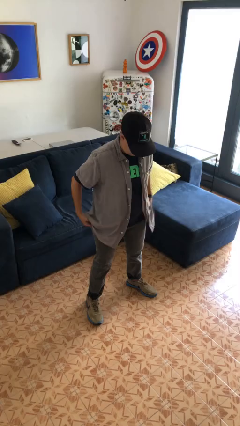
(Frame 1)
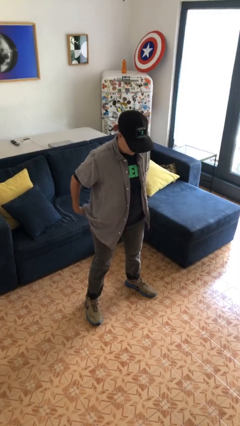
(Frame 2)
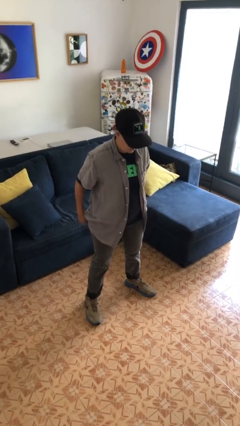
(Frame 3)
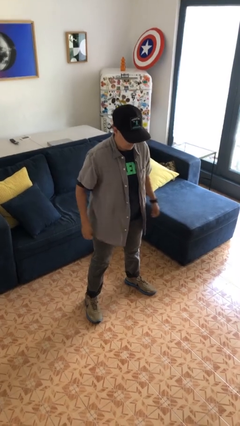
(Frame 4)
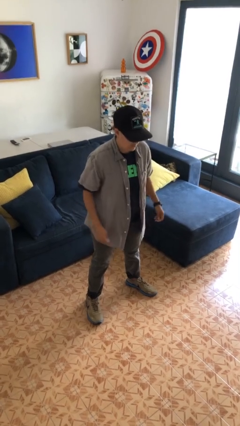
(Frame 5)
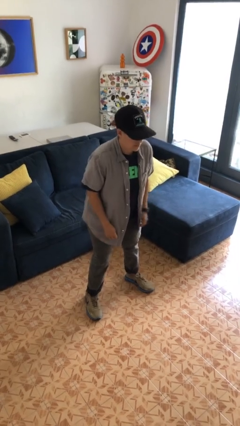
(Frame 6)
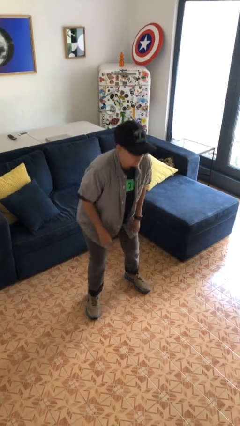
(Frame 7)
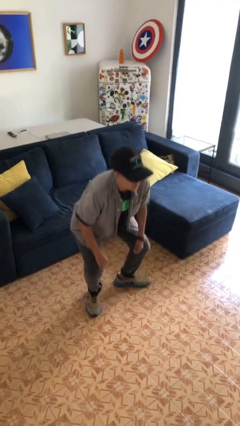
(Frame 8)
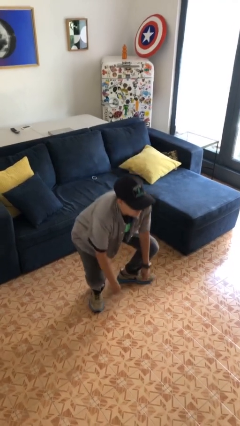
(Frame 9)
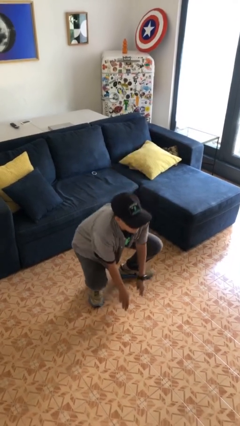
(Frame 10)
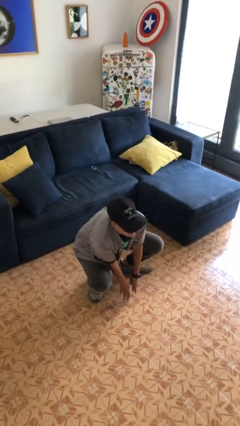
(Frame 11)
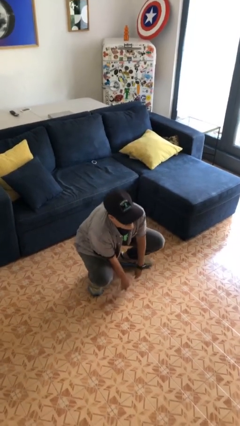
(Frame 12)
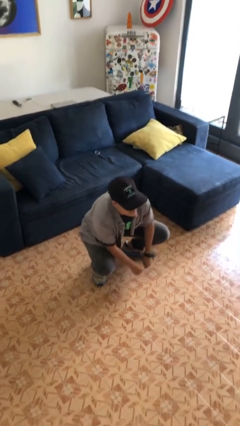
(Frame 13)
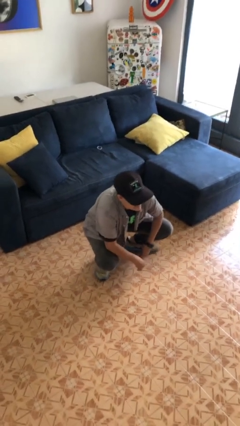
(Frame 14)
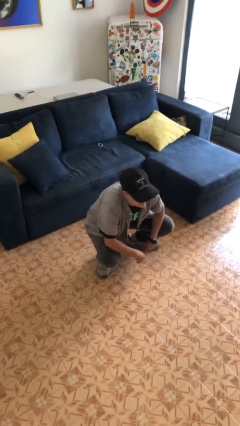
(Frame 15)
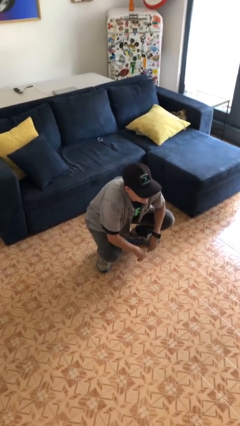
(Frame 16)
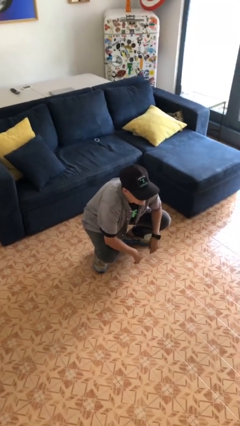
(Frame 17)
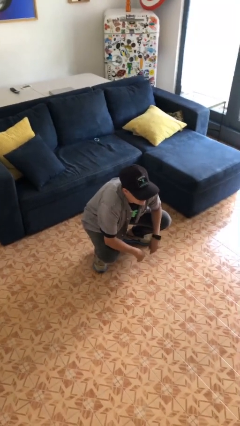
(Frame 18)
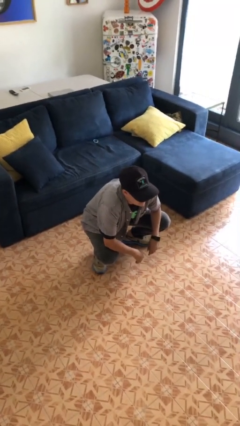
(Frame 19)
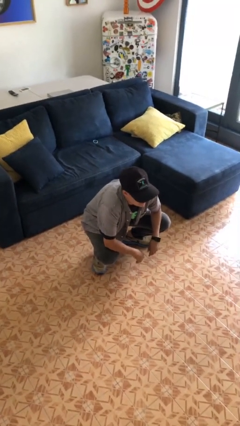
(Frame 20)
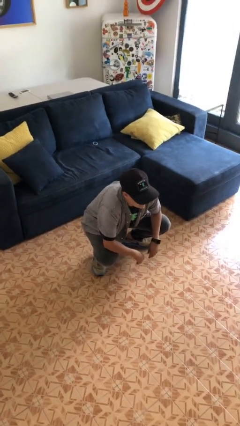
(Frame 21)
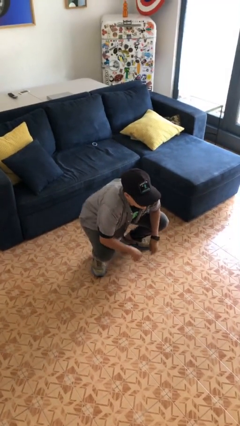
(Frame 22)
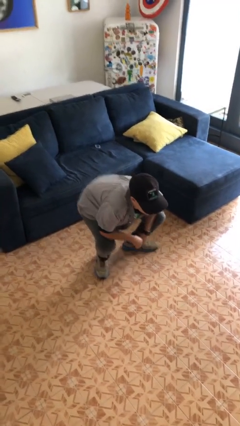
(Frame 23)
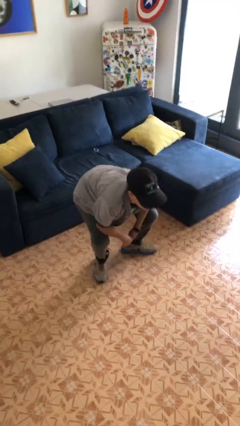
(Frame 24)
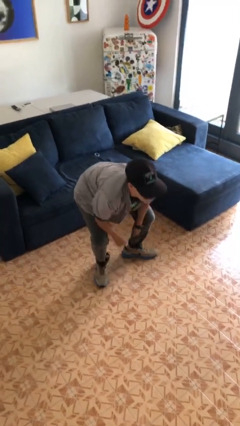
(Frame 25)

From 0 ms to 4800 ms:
person squats

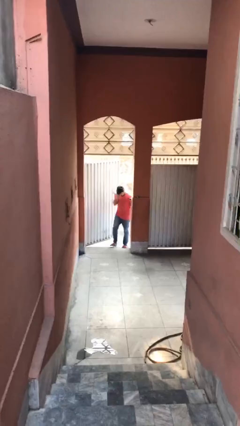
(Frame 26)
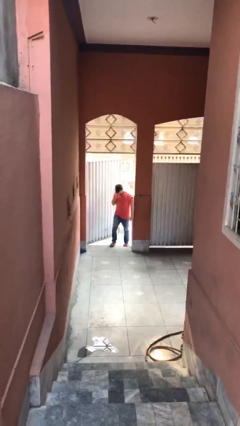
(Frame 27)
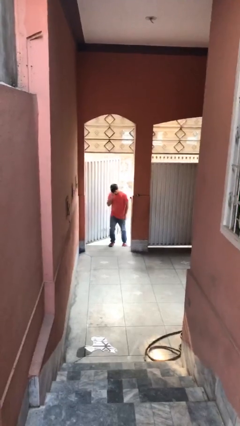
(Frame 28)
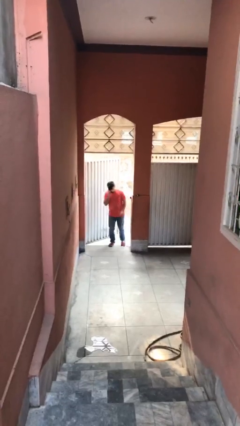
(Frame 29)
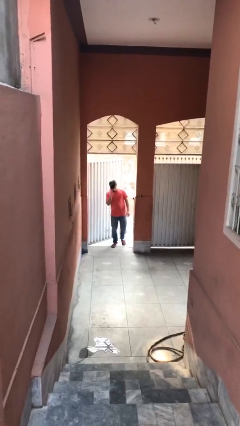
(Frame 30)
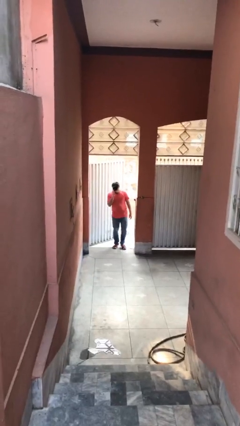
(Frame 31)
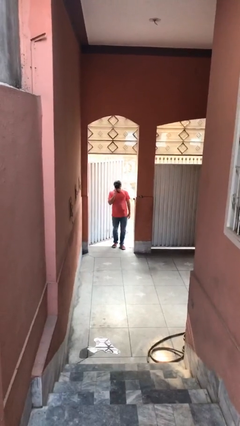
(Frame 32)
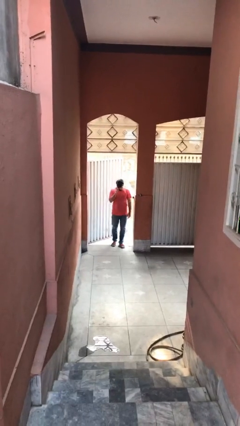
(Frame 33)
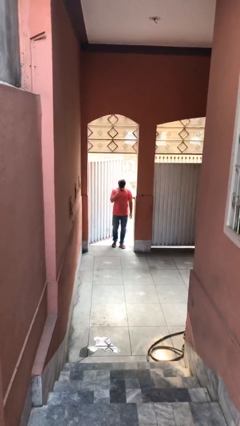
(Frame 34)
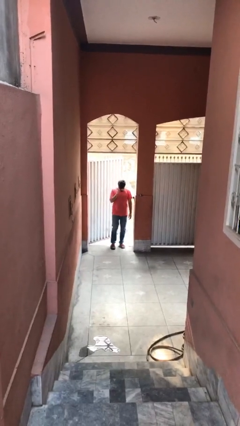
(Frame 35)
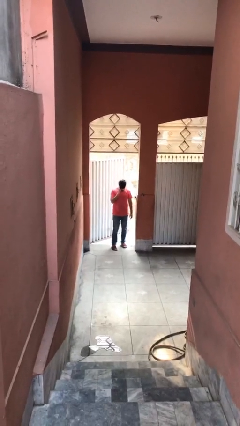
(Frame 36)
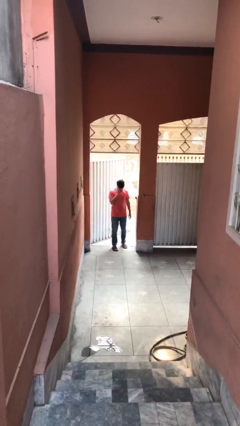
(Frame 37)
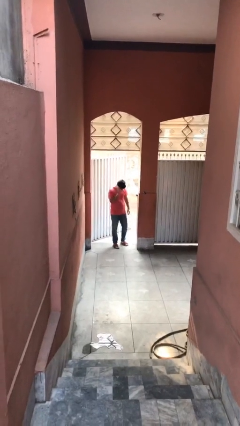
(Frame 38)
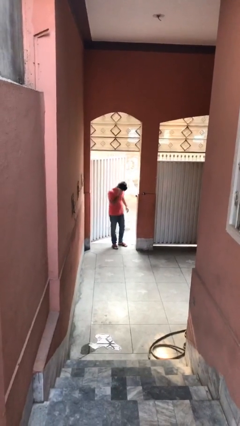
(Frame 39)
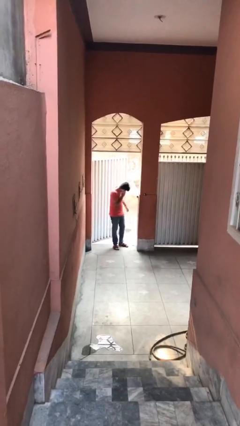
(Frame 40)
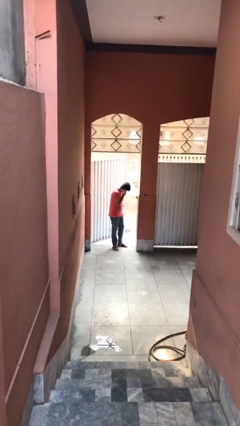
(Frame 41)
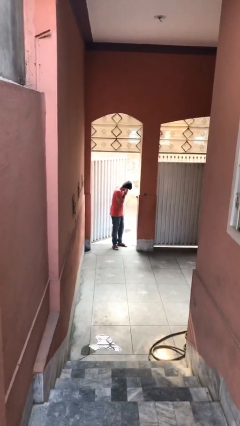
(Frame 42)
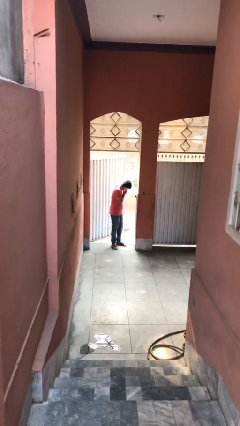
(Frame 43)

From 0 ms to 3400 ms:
person enters scene through structure

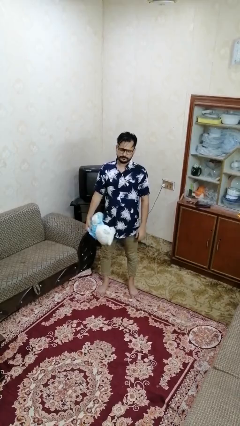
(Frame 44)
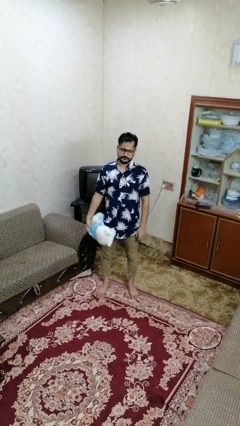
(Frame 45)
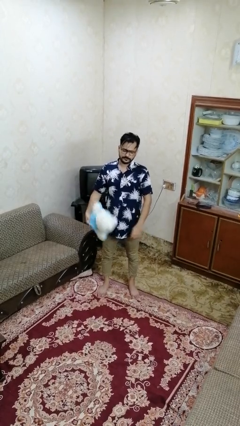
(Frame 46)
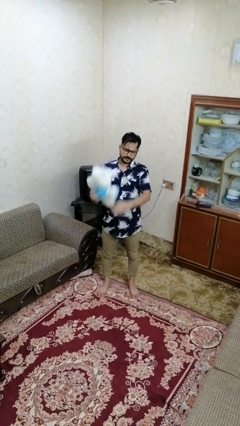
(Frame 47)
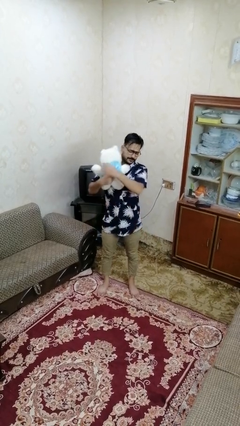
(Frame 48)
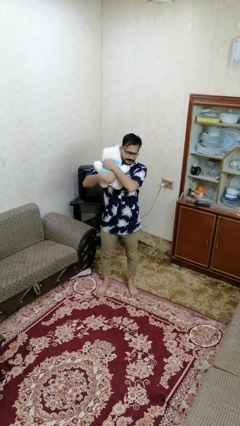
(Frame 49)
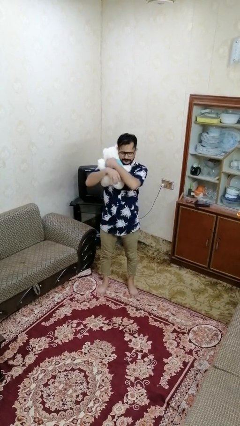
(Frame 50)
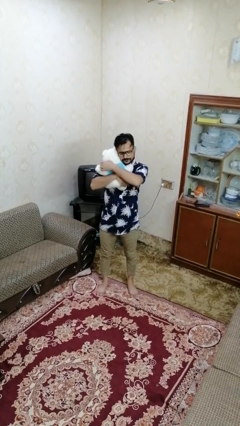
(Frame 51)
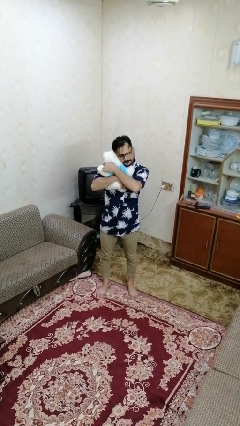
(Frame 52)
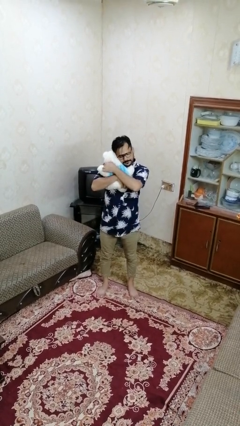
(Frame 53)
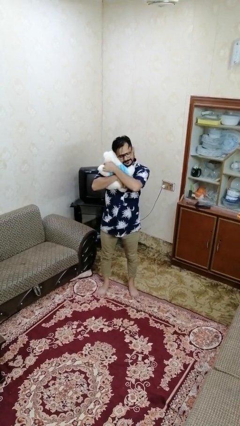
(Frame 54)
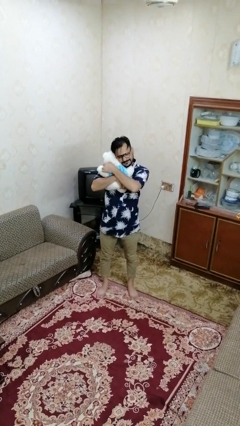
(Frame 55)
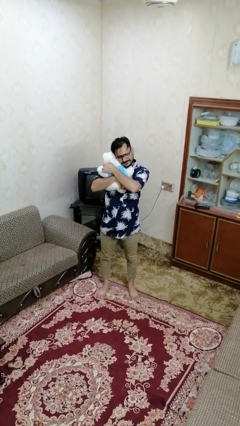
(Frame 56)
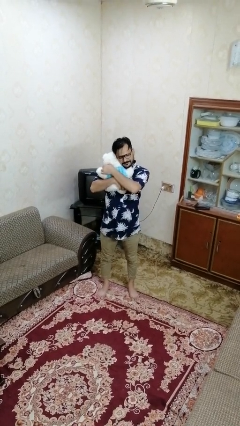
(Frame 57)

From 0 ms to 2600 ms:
person hugs stuffed animal

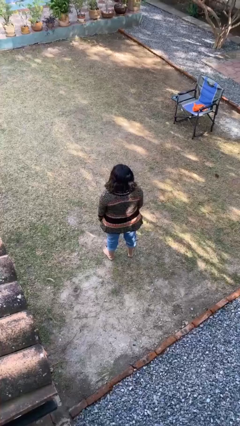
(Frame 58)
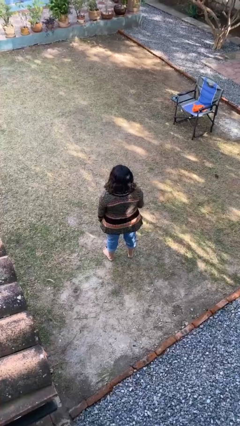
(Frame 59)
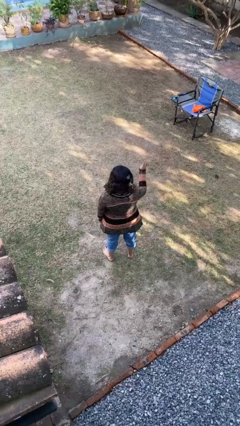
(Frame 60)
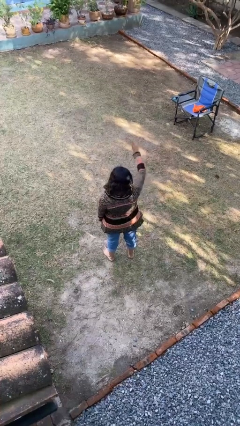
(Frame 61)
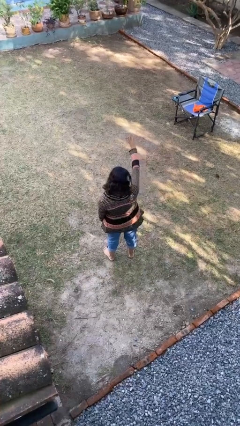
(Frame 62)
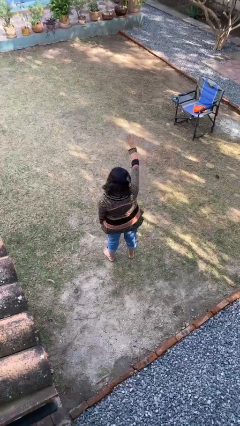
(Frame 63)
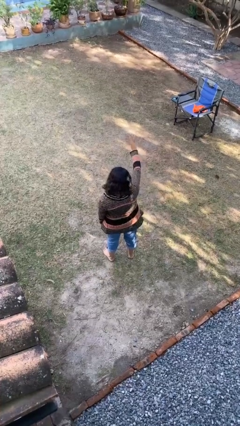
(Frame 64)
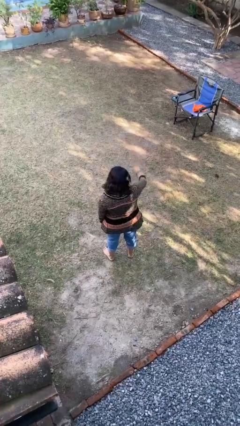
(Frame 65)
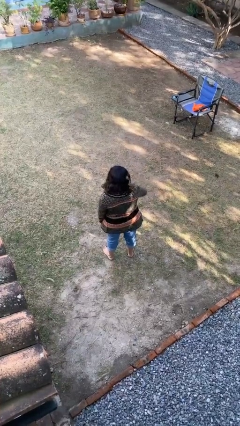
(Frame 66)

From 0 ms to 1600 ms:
person gestures number three

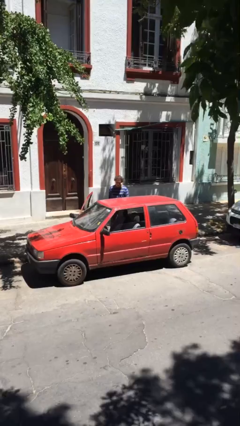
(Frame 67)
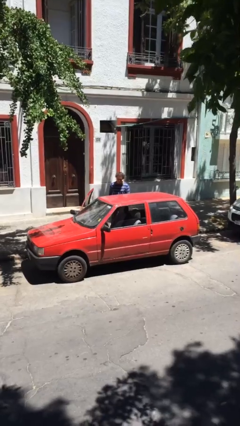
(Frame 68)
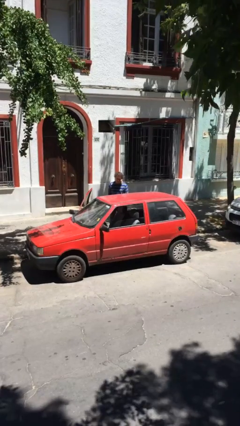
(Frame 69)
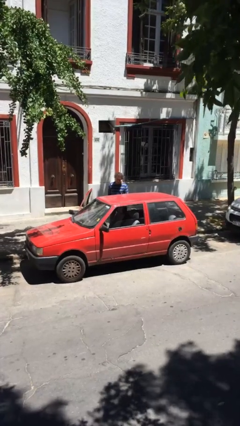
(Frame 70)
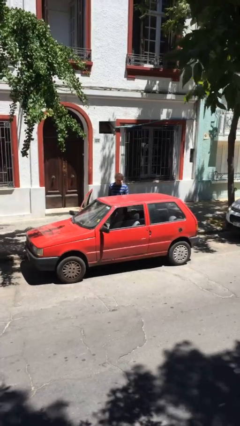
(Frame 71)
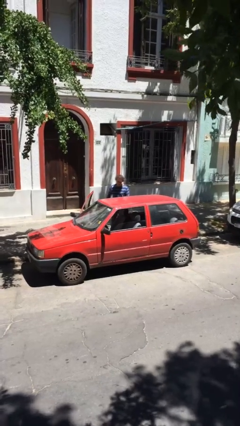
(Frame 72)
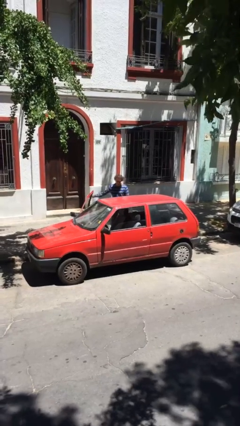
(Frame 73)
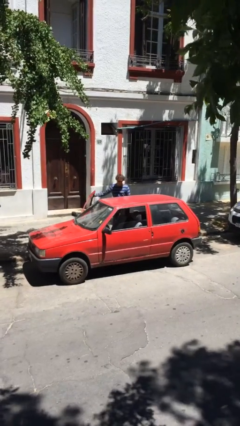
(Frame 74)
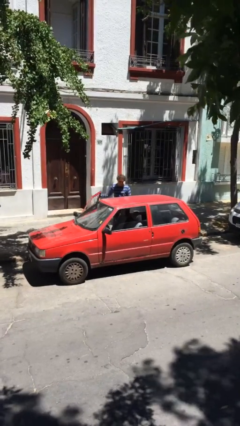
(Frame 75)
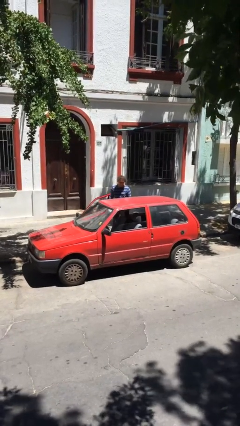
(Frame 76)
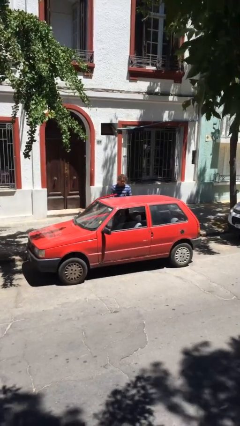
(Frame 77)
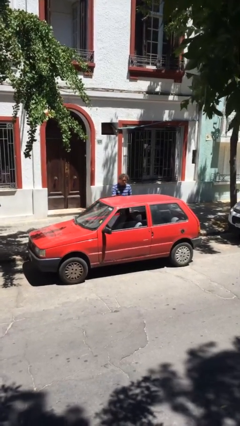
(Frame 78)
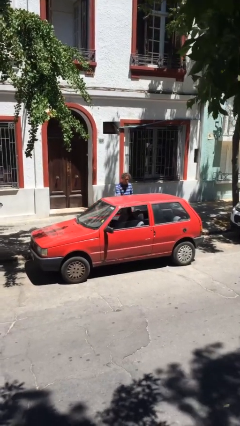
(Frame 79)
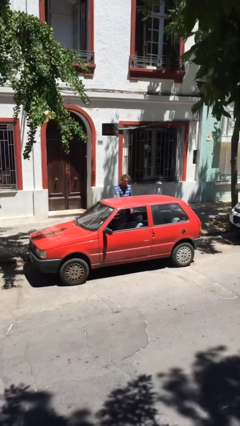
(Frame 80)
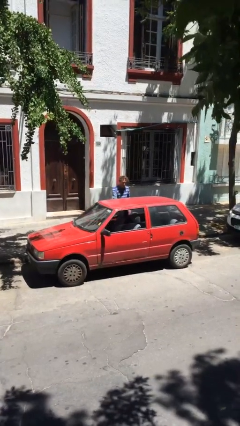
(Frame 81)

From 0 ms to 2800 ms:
person closes car door

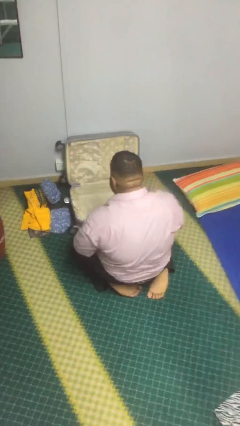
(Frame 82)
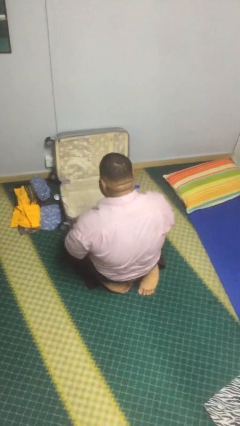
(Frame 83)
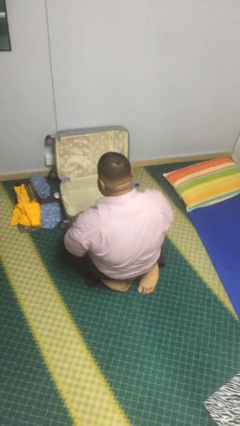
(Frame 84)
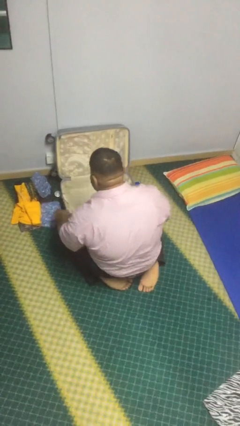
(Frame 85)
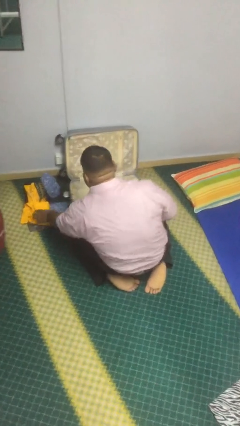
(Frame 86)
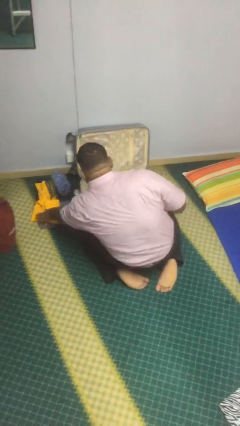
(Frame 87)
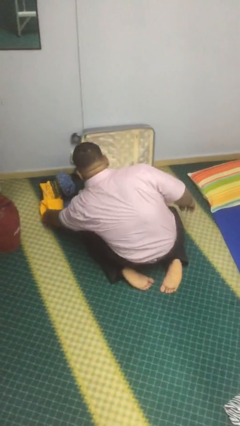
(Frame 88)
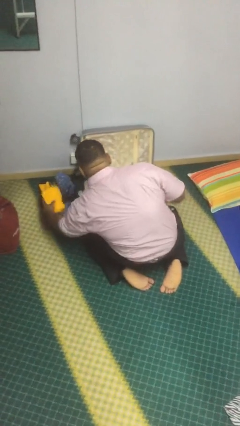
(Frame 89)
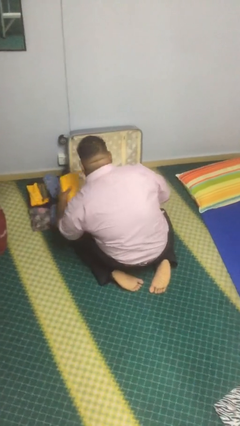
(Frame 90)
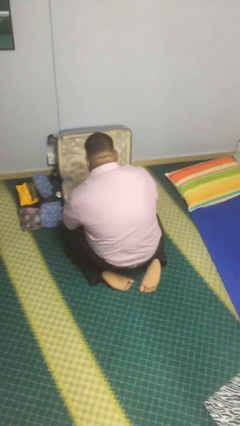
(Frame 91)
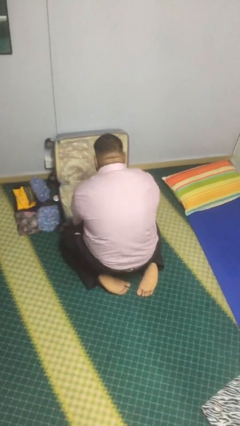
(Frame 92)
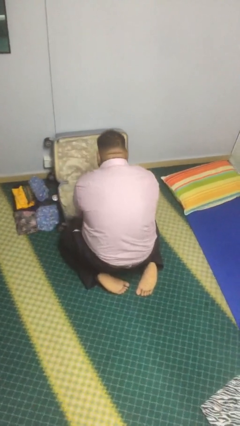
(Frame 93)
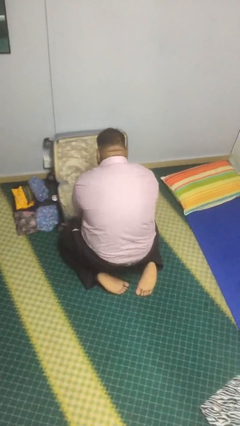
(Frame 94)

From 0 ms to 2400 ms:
person loads clothes into suitcase
